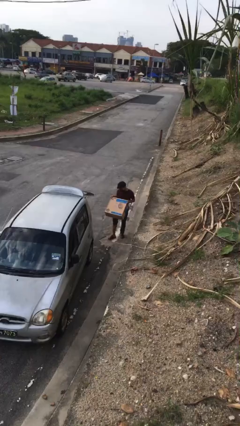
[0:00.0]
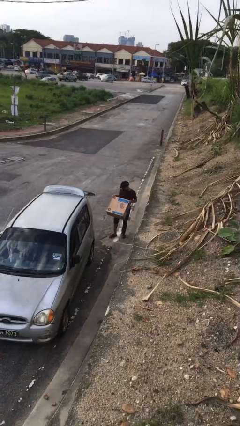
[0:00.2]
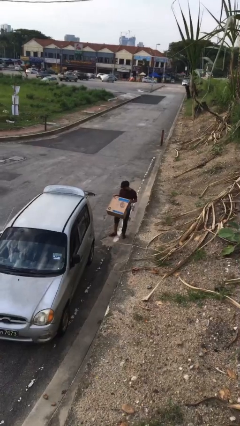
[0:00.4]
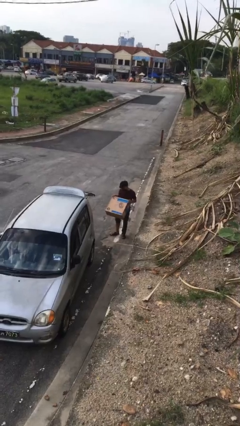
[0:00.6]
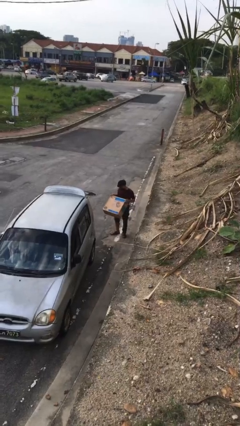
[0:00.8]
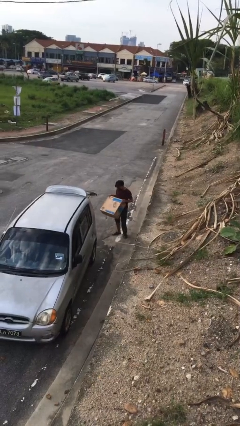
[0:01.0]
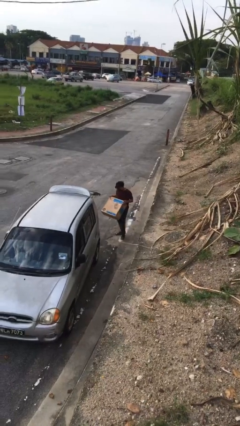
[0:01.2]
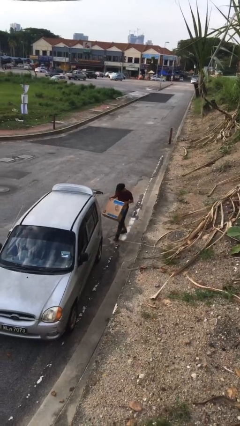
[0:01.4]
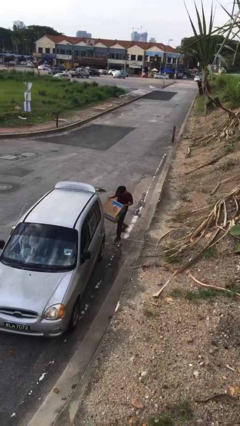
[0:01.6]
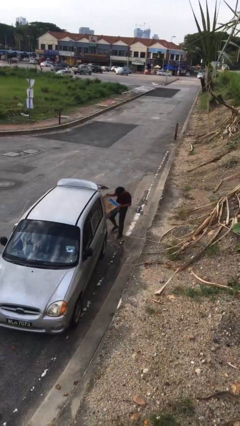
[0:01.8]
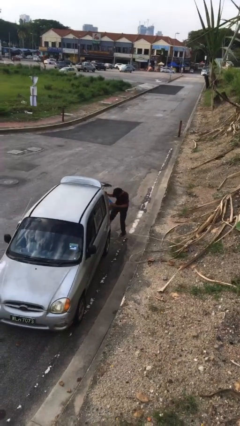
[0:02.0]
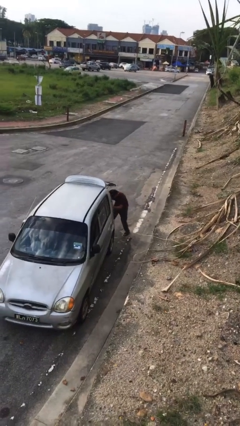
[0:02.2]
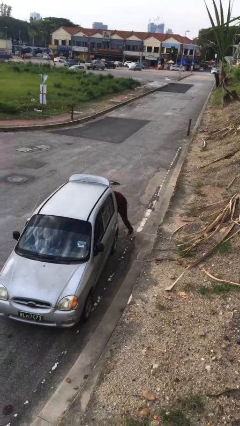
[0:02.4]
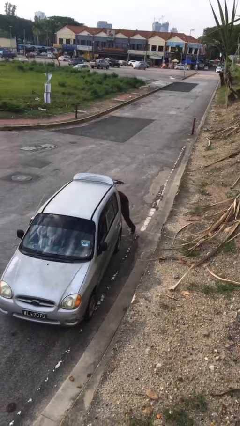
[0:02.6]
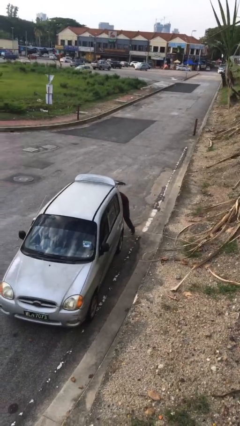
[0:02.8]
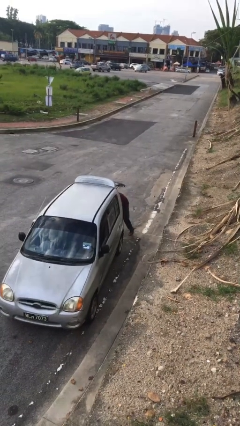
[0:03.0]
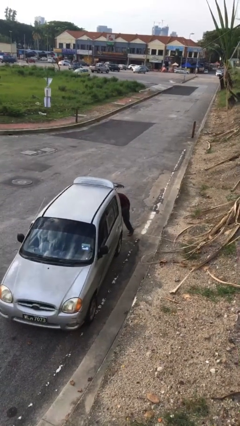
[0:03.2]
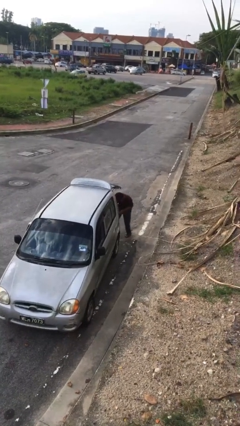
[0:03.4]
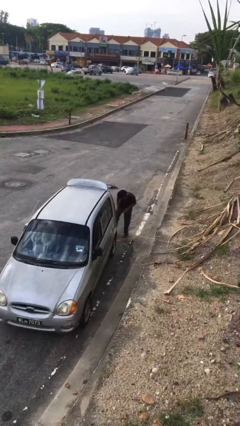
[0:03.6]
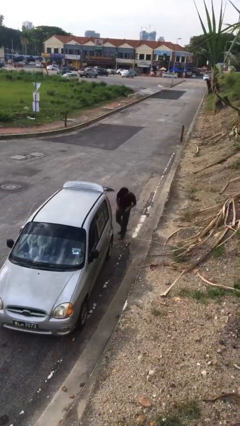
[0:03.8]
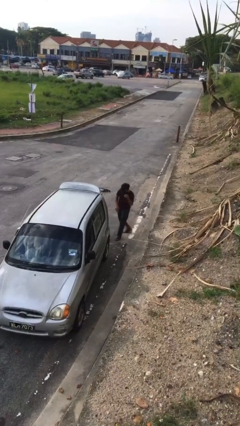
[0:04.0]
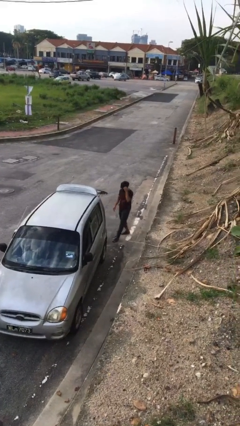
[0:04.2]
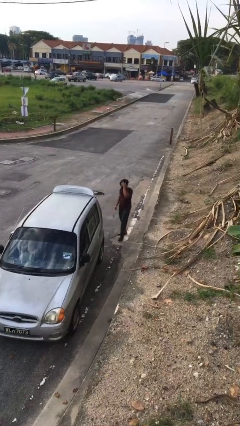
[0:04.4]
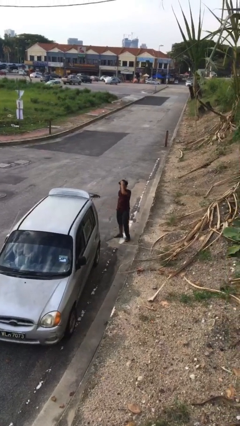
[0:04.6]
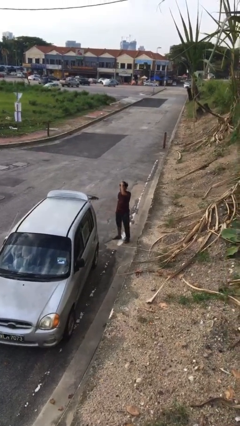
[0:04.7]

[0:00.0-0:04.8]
person loads car

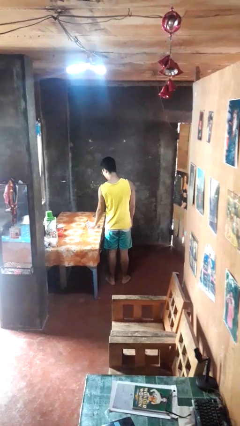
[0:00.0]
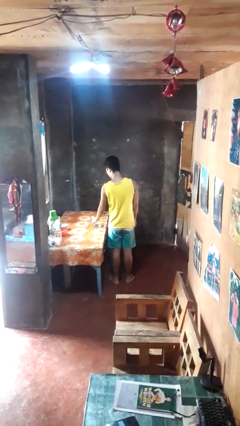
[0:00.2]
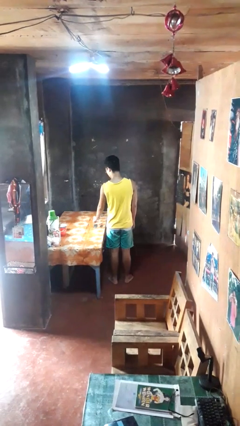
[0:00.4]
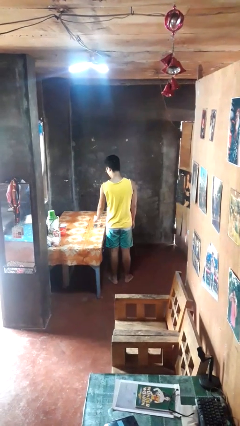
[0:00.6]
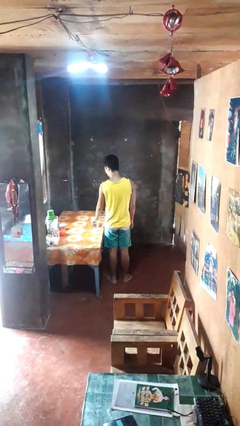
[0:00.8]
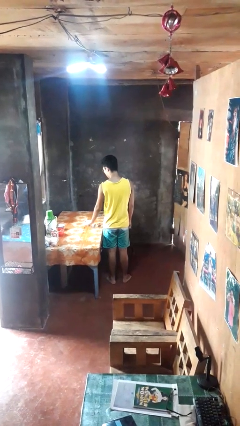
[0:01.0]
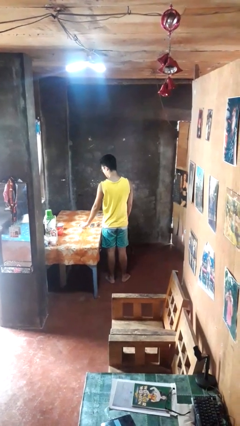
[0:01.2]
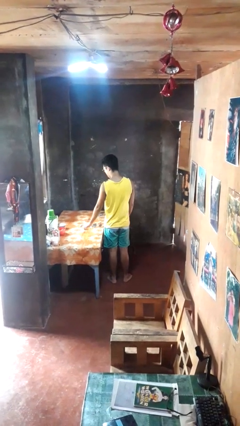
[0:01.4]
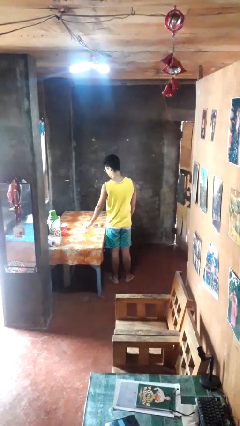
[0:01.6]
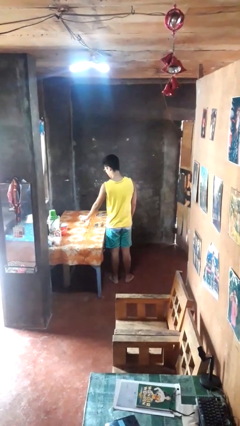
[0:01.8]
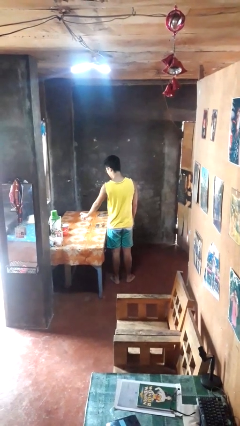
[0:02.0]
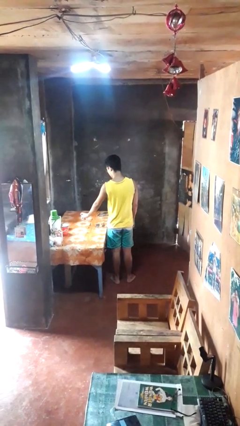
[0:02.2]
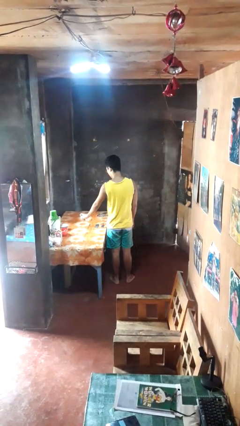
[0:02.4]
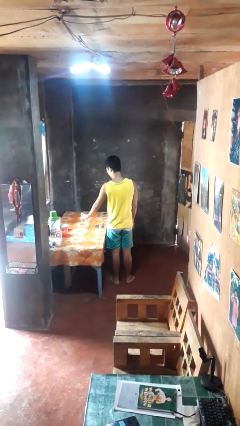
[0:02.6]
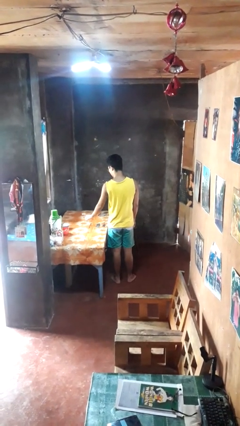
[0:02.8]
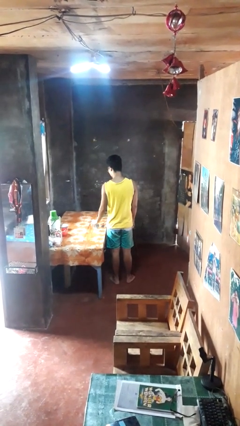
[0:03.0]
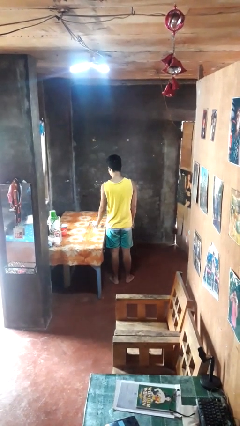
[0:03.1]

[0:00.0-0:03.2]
person sprays from bottle

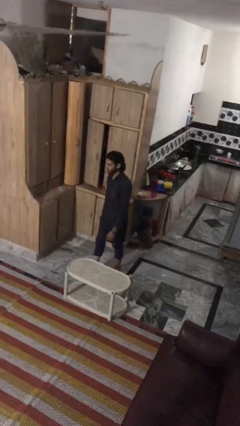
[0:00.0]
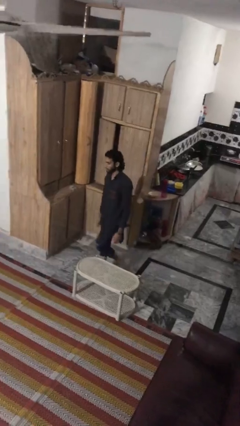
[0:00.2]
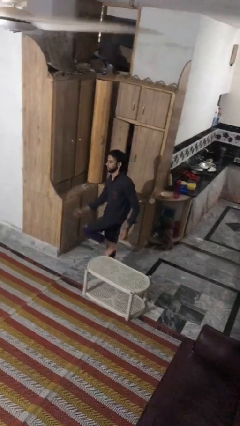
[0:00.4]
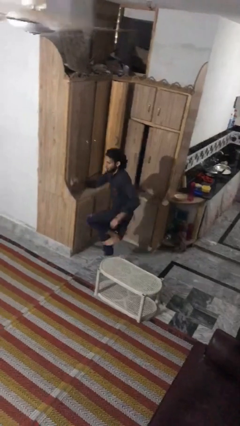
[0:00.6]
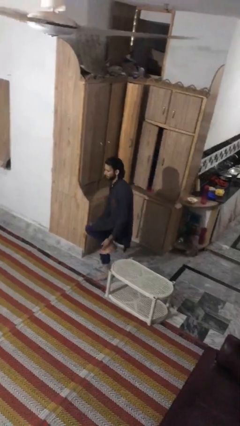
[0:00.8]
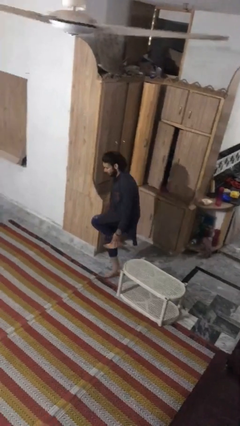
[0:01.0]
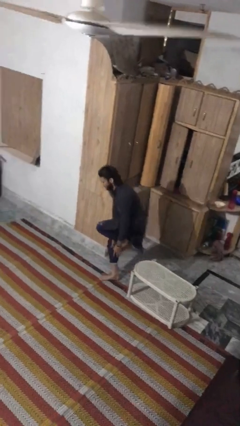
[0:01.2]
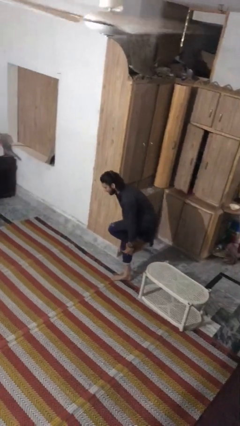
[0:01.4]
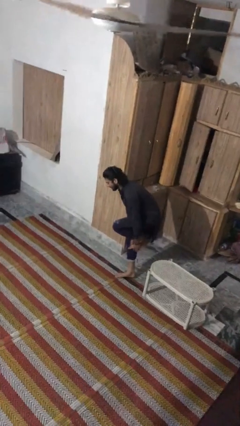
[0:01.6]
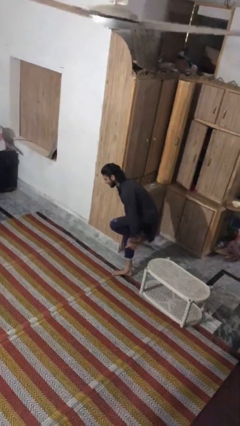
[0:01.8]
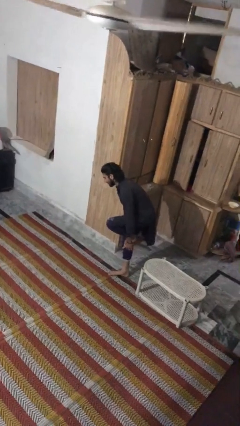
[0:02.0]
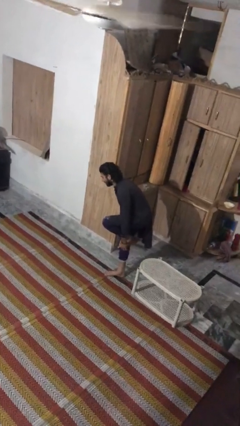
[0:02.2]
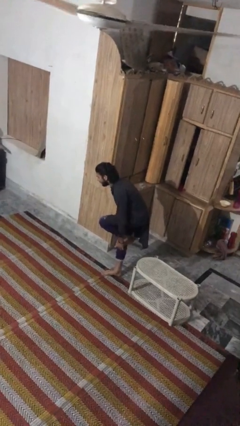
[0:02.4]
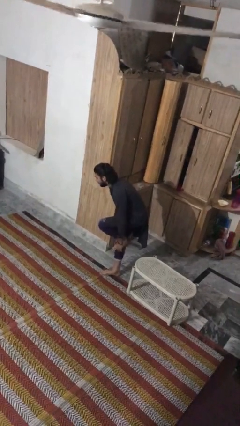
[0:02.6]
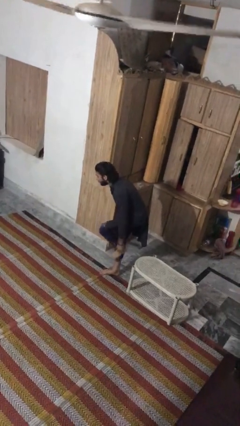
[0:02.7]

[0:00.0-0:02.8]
person bumps into table

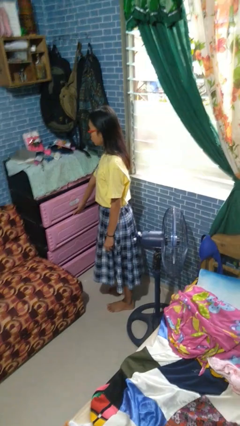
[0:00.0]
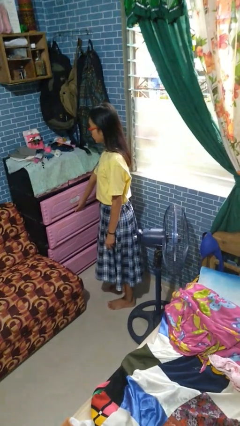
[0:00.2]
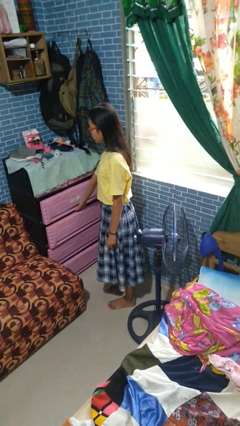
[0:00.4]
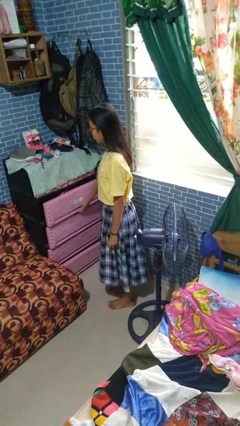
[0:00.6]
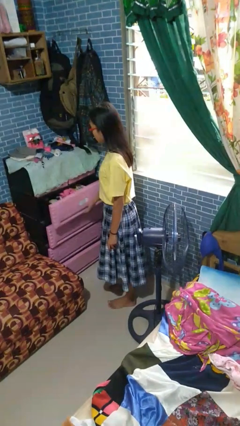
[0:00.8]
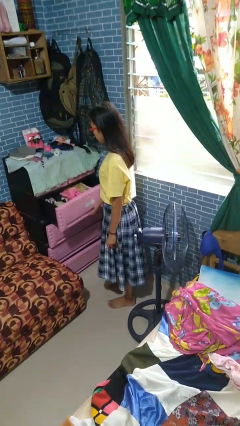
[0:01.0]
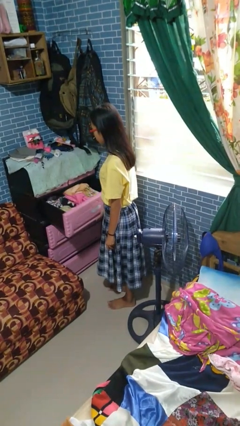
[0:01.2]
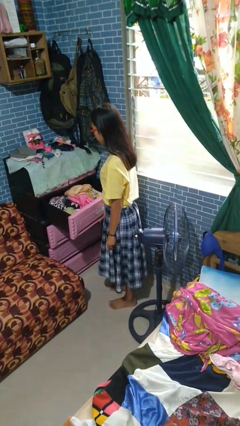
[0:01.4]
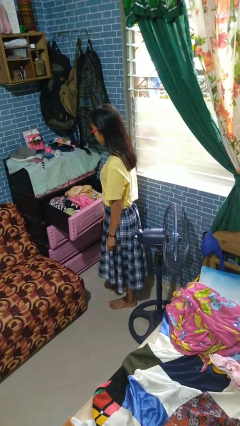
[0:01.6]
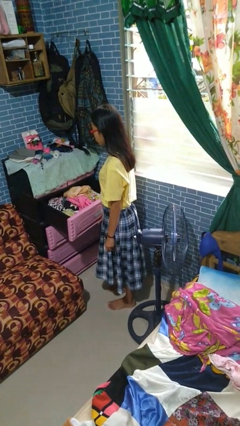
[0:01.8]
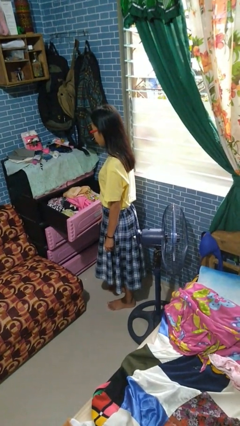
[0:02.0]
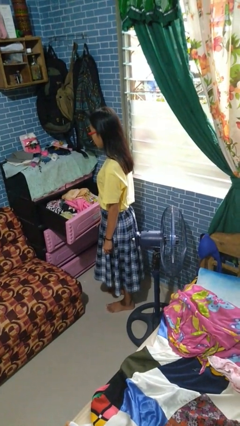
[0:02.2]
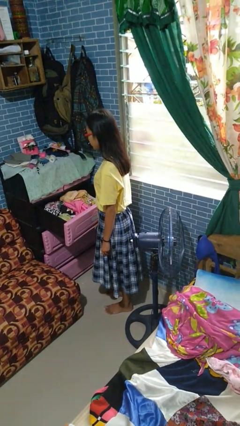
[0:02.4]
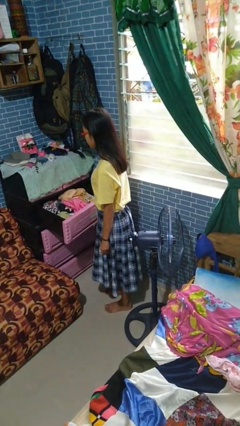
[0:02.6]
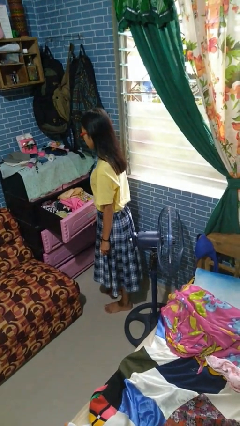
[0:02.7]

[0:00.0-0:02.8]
person opens dresser drawer

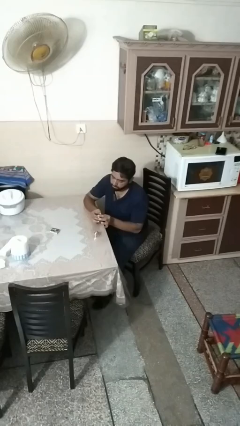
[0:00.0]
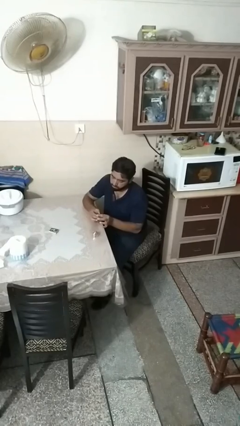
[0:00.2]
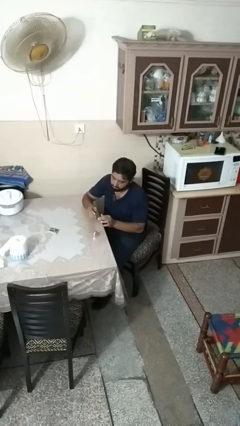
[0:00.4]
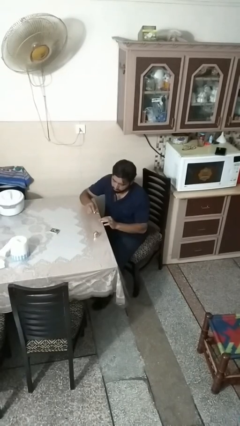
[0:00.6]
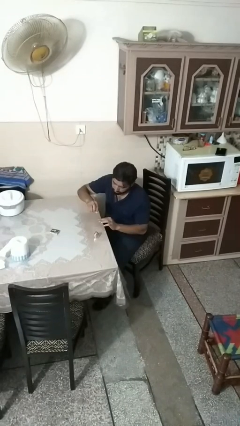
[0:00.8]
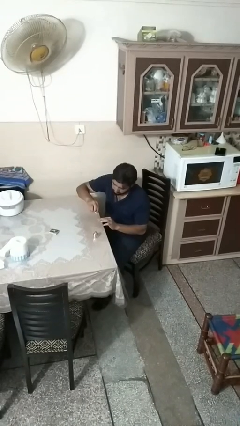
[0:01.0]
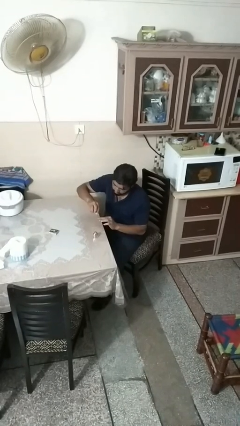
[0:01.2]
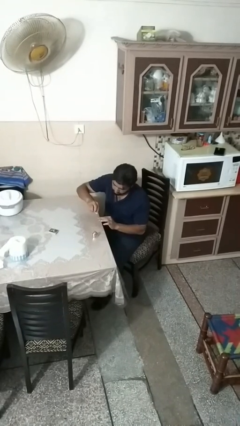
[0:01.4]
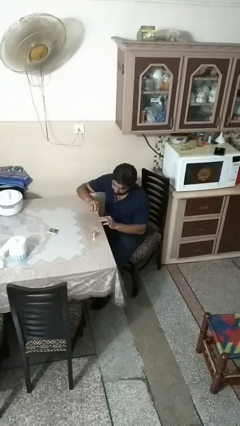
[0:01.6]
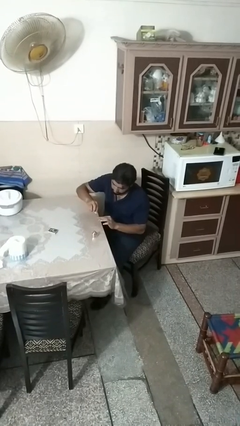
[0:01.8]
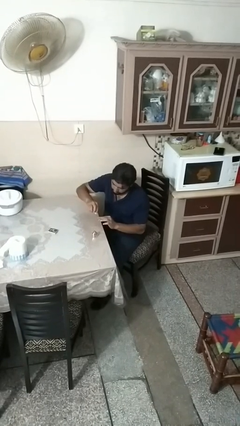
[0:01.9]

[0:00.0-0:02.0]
person paints fingernails

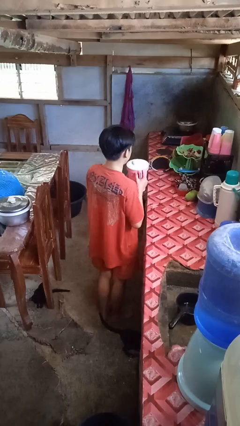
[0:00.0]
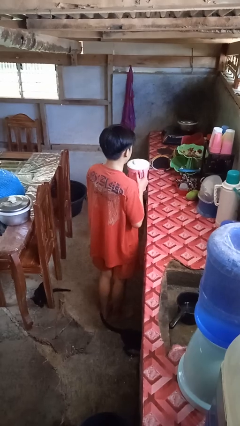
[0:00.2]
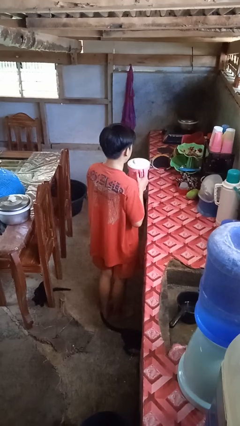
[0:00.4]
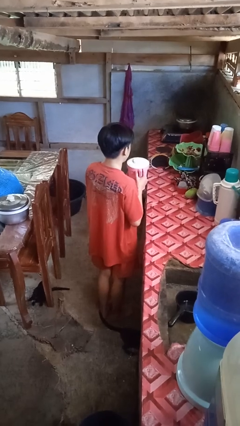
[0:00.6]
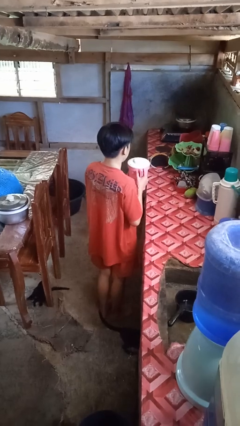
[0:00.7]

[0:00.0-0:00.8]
person puts down object on countertop

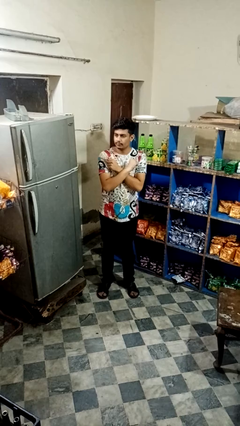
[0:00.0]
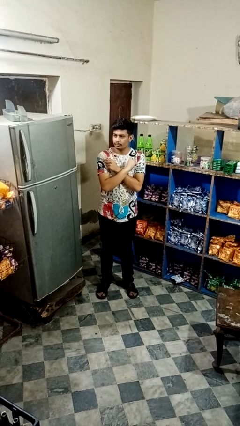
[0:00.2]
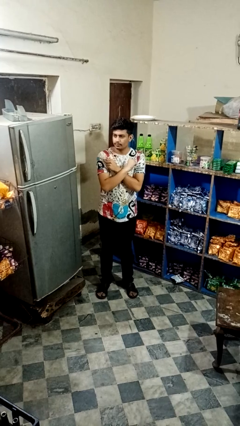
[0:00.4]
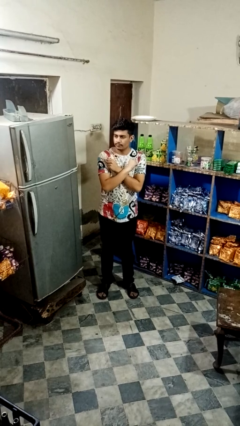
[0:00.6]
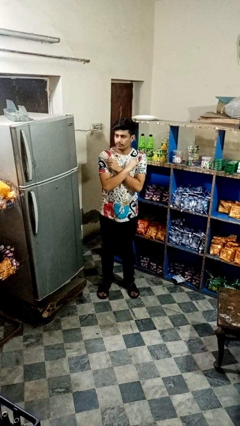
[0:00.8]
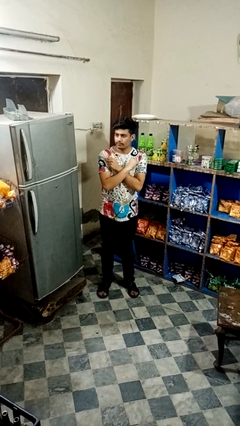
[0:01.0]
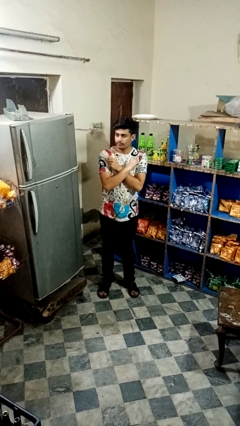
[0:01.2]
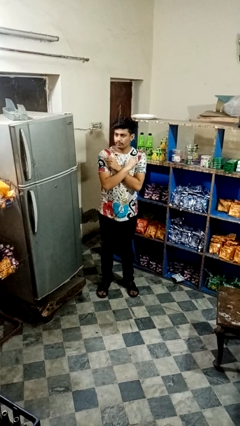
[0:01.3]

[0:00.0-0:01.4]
person gestures arms x
